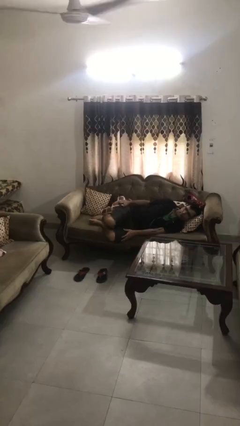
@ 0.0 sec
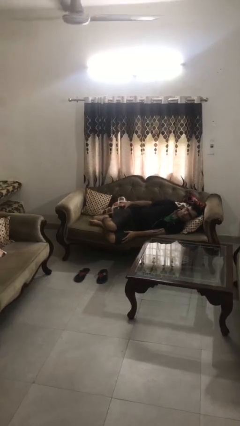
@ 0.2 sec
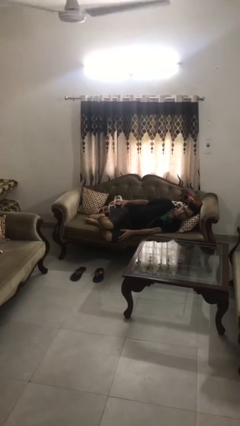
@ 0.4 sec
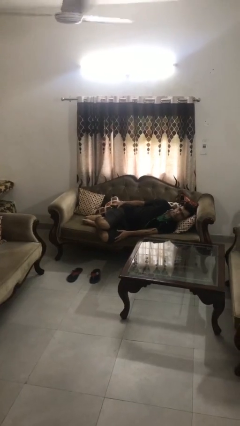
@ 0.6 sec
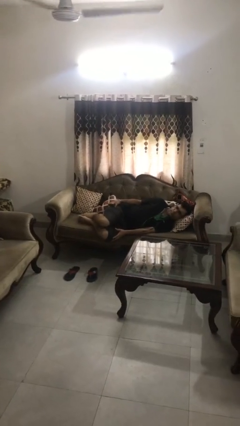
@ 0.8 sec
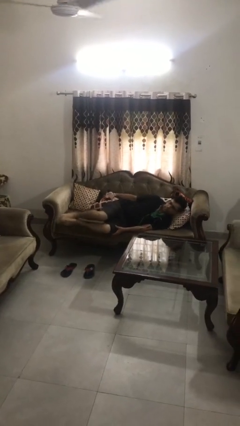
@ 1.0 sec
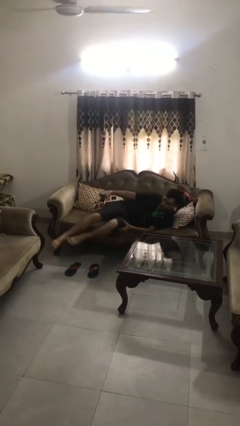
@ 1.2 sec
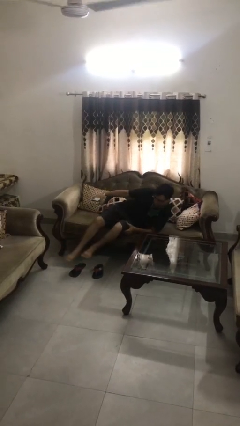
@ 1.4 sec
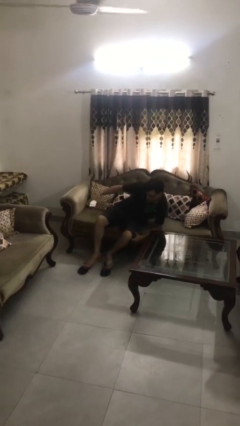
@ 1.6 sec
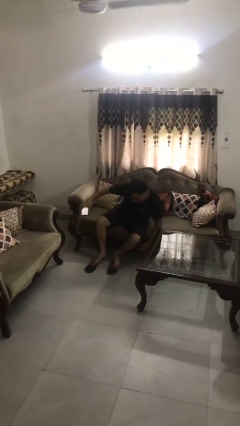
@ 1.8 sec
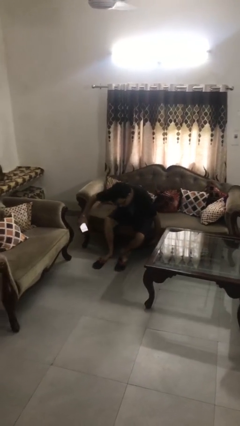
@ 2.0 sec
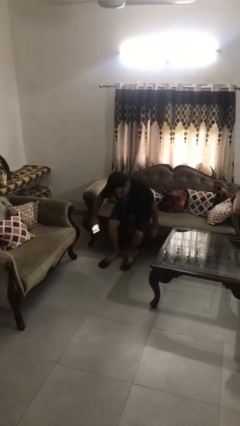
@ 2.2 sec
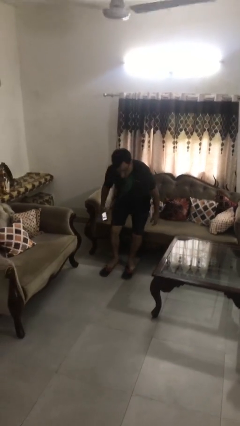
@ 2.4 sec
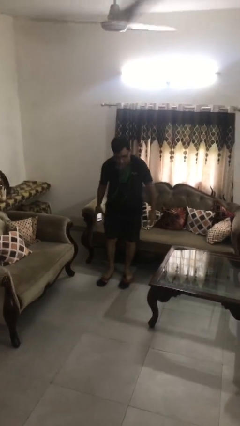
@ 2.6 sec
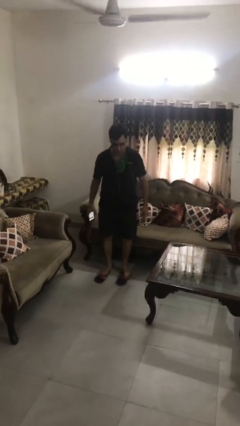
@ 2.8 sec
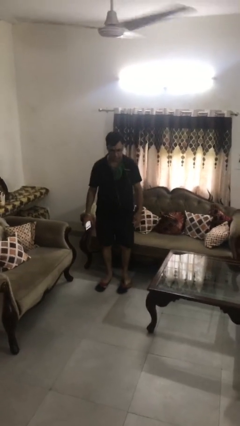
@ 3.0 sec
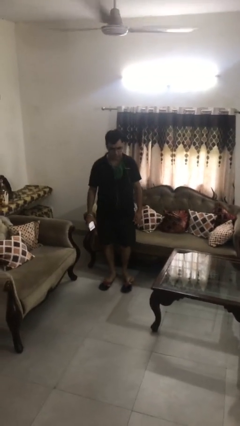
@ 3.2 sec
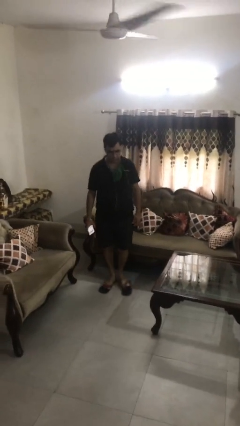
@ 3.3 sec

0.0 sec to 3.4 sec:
person stands up

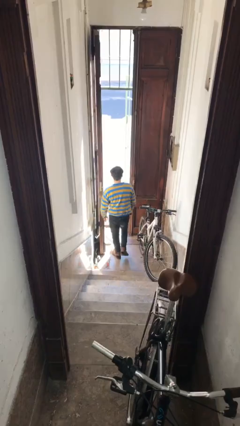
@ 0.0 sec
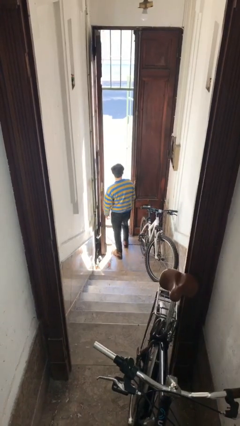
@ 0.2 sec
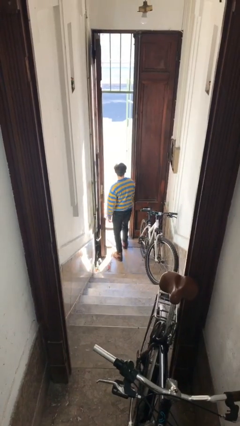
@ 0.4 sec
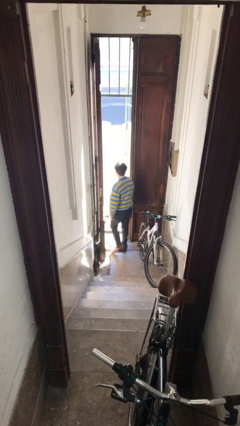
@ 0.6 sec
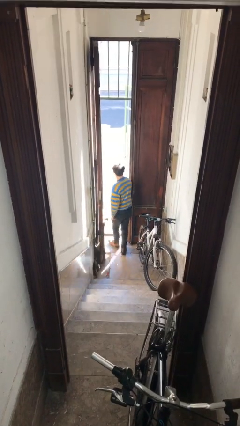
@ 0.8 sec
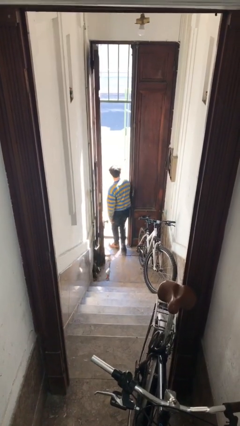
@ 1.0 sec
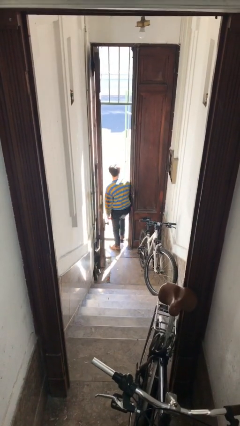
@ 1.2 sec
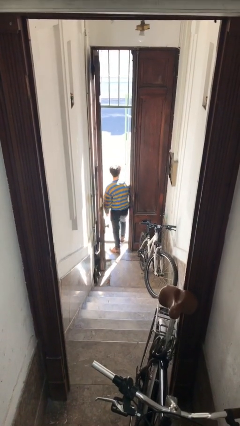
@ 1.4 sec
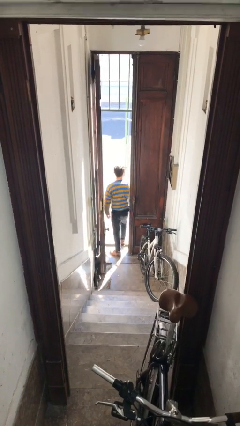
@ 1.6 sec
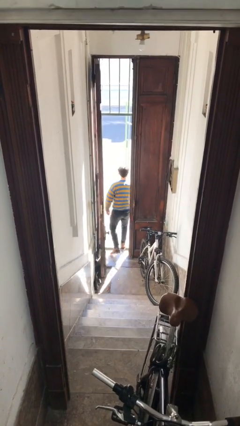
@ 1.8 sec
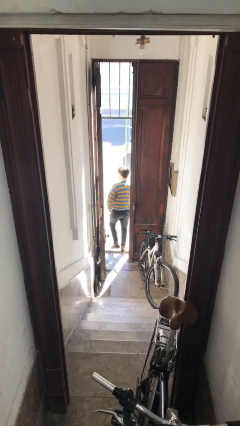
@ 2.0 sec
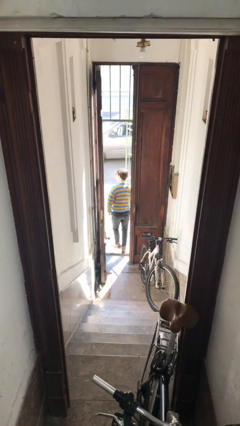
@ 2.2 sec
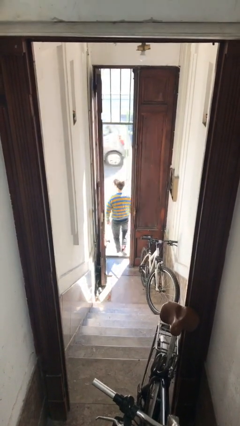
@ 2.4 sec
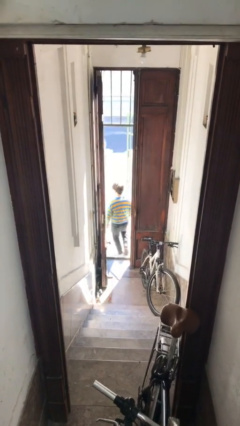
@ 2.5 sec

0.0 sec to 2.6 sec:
person exits scene through structure

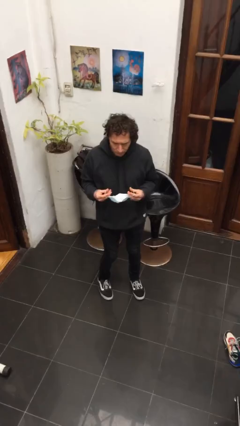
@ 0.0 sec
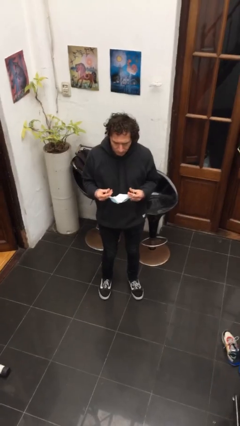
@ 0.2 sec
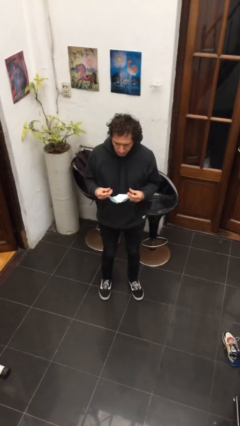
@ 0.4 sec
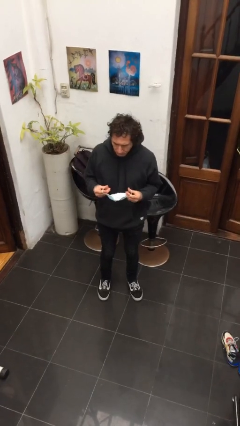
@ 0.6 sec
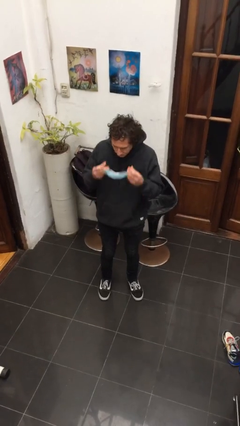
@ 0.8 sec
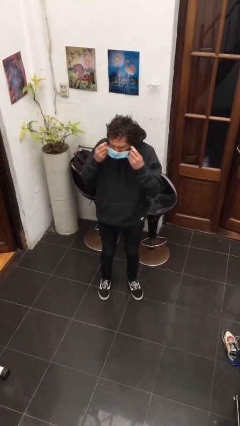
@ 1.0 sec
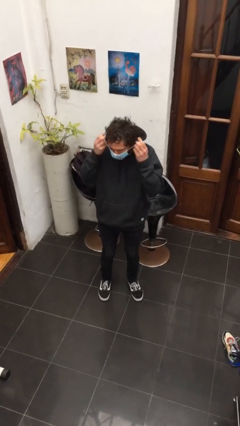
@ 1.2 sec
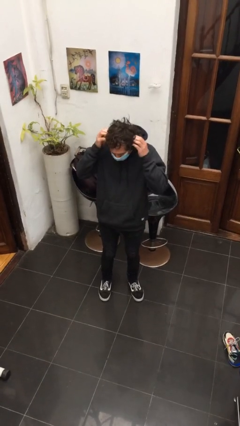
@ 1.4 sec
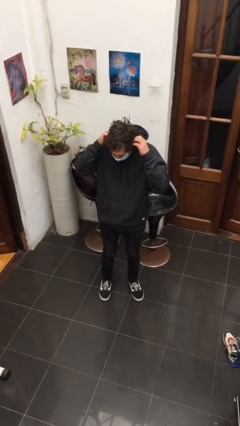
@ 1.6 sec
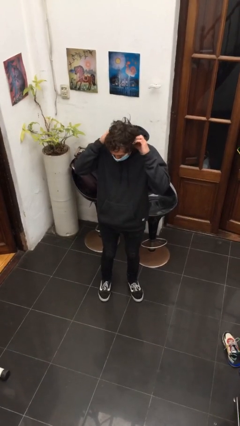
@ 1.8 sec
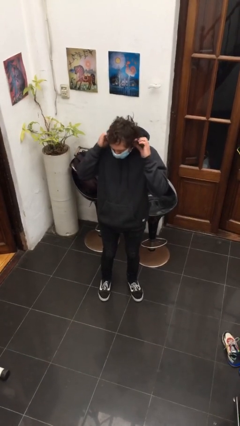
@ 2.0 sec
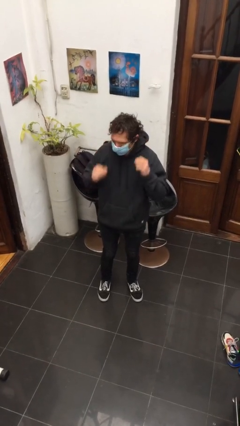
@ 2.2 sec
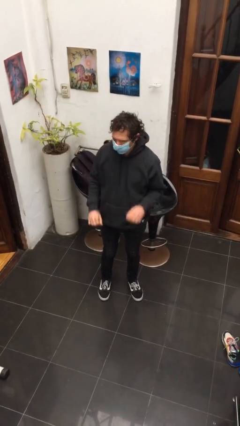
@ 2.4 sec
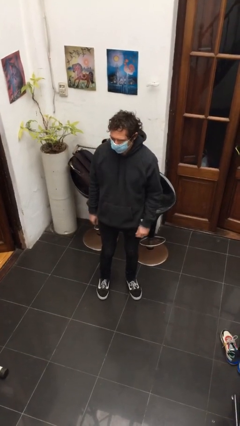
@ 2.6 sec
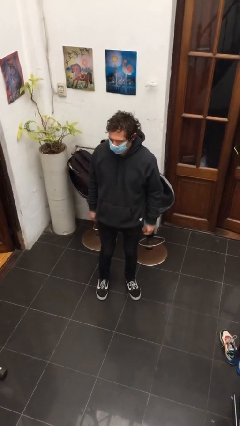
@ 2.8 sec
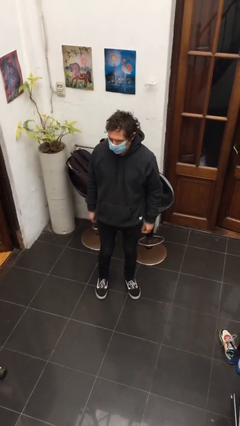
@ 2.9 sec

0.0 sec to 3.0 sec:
person puts on facemask

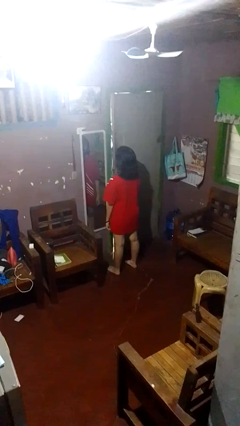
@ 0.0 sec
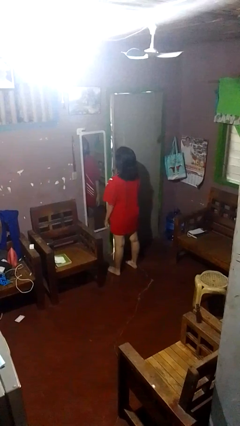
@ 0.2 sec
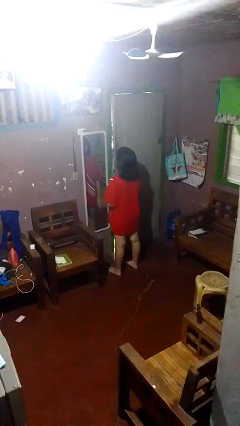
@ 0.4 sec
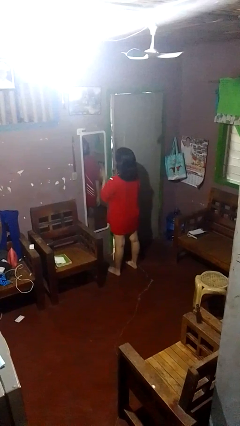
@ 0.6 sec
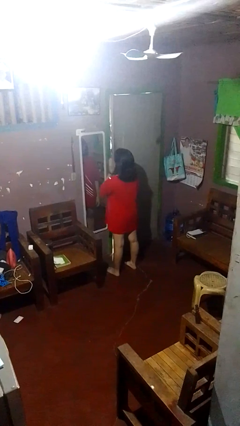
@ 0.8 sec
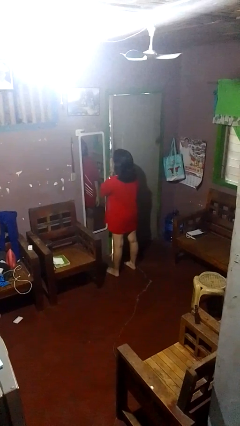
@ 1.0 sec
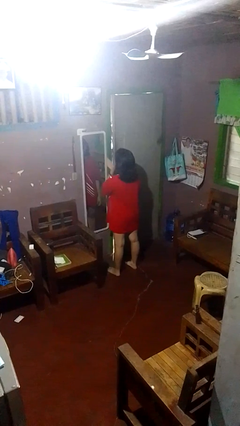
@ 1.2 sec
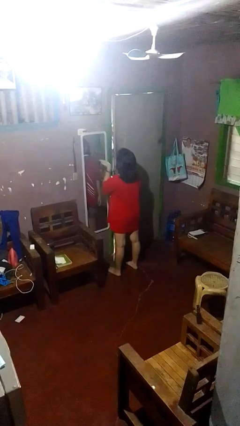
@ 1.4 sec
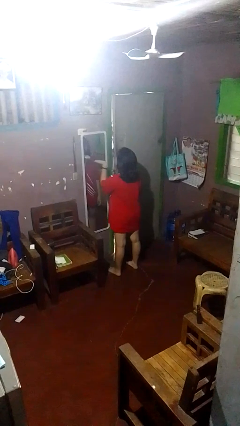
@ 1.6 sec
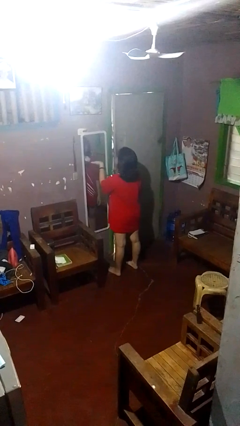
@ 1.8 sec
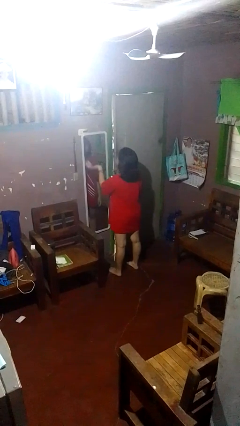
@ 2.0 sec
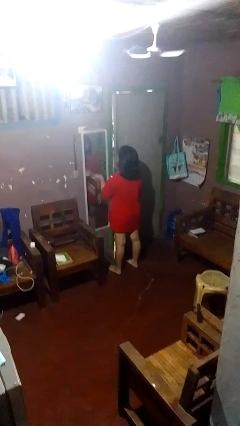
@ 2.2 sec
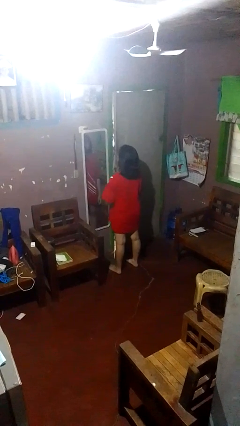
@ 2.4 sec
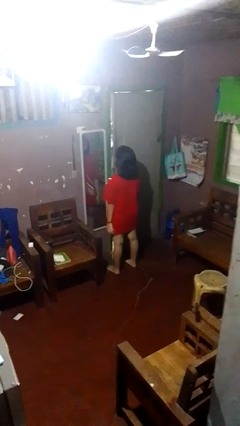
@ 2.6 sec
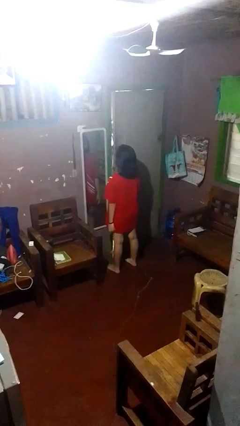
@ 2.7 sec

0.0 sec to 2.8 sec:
person gestures blow kiss

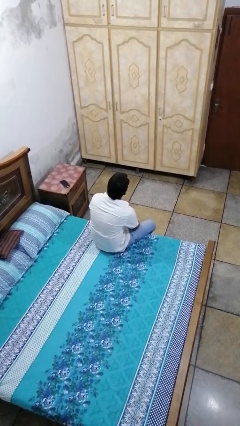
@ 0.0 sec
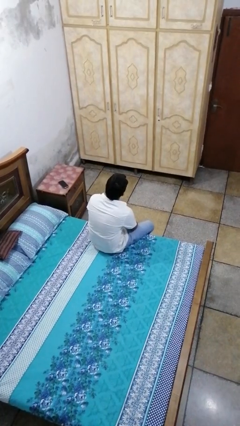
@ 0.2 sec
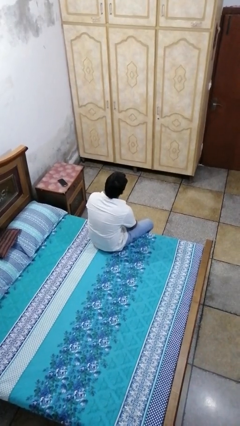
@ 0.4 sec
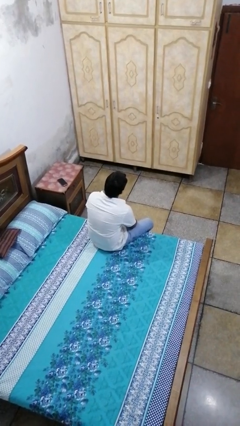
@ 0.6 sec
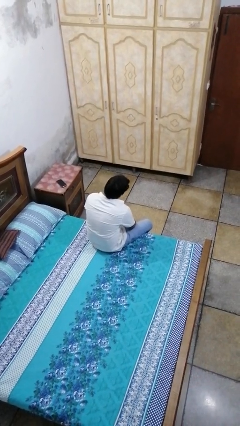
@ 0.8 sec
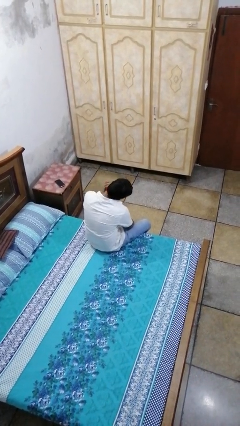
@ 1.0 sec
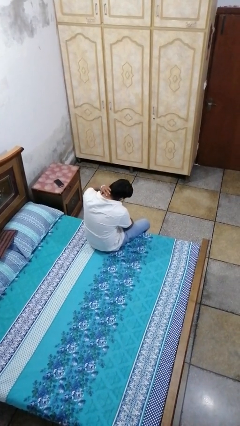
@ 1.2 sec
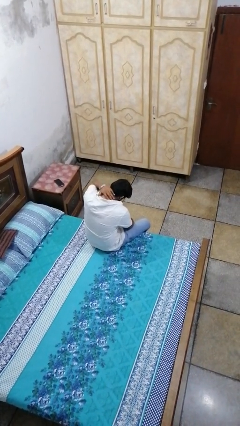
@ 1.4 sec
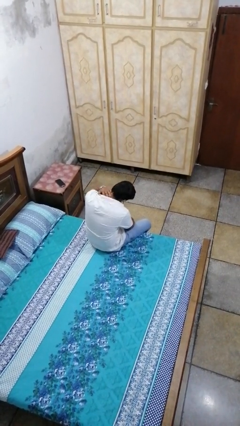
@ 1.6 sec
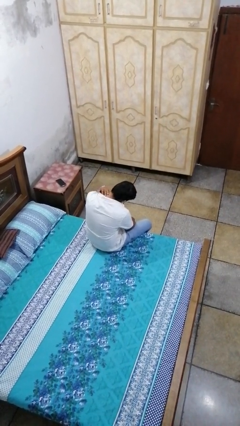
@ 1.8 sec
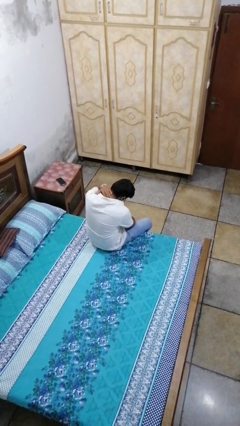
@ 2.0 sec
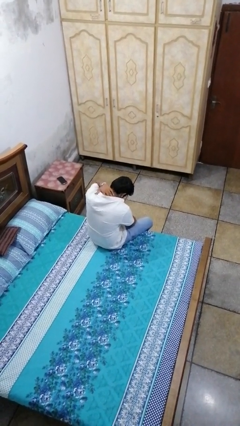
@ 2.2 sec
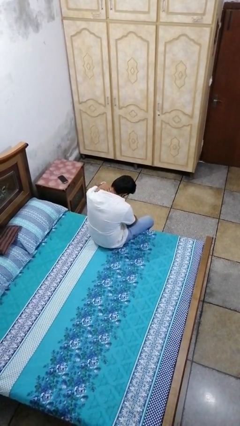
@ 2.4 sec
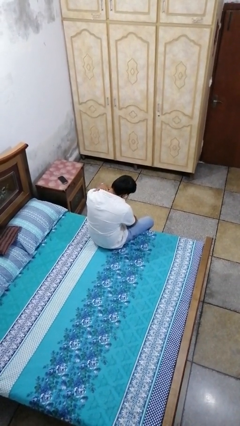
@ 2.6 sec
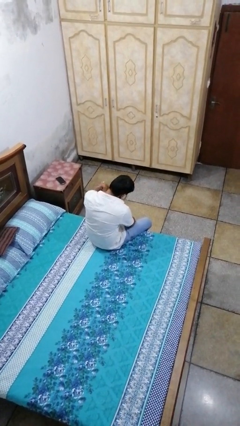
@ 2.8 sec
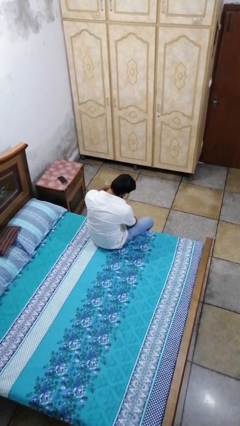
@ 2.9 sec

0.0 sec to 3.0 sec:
person rubs neck

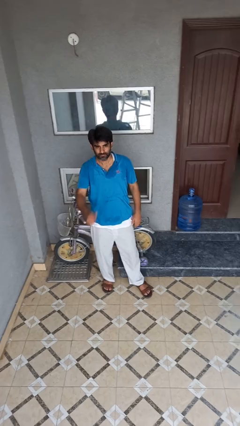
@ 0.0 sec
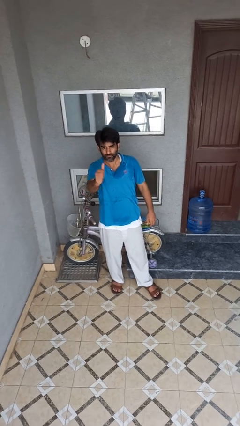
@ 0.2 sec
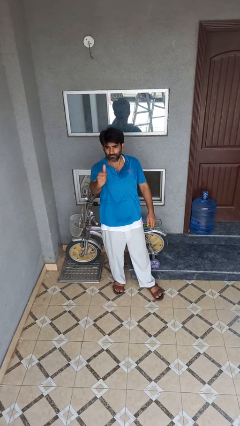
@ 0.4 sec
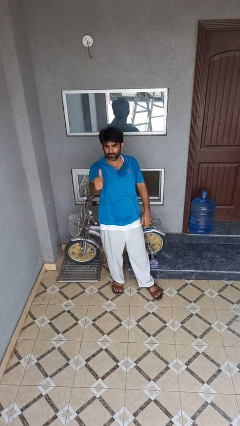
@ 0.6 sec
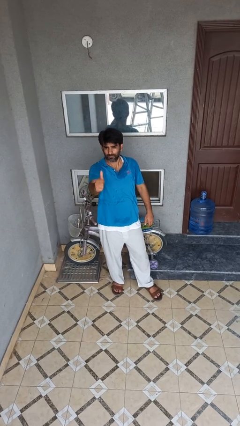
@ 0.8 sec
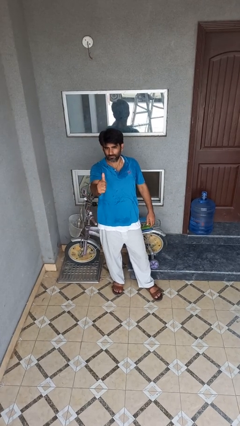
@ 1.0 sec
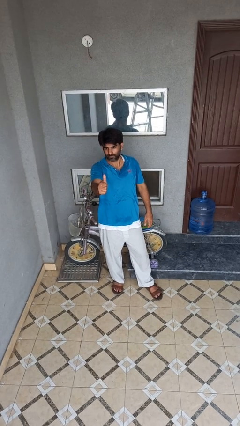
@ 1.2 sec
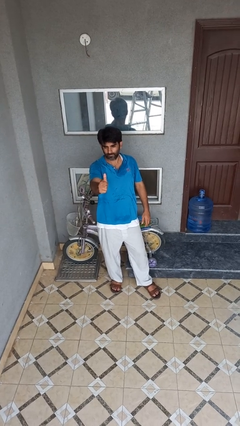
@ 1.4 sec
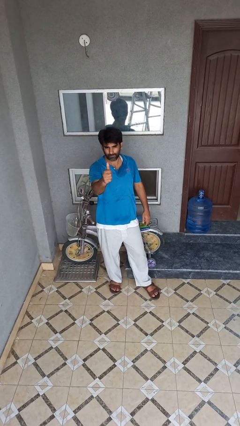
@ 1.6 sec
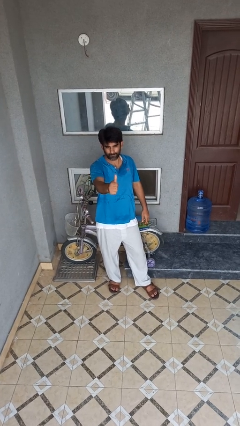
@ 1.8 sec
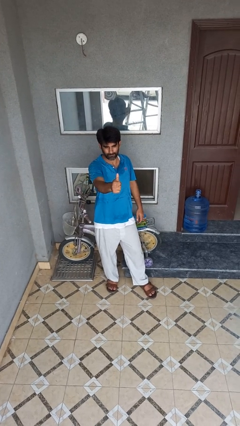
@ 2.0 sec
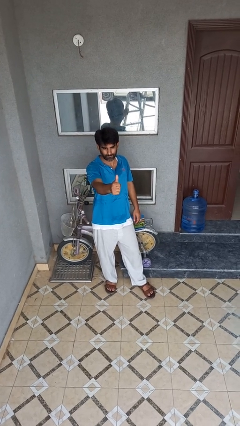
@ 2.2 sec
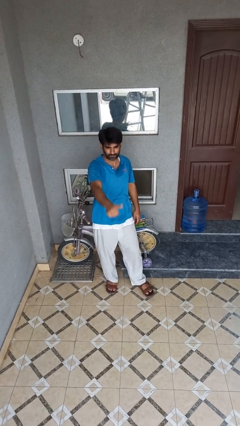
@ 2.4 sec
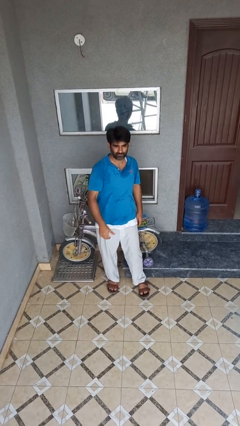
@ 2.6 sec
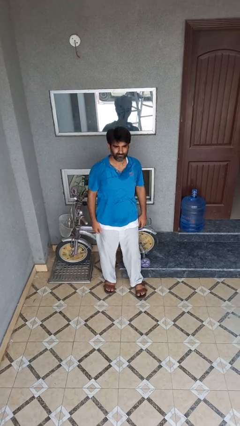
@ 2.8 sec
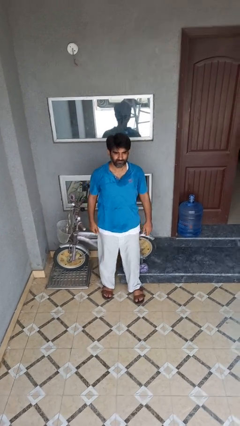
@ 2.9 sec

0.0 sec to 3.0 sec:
person gestures thumbs up
